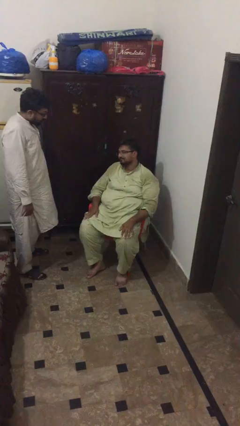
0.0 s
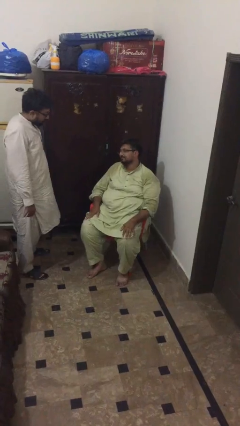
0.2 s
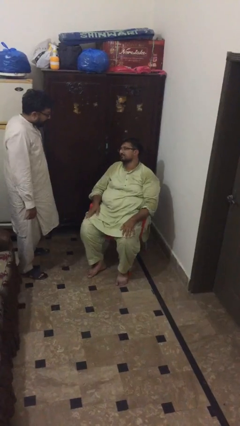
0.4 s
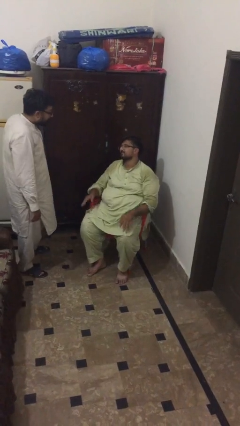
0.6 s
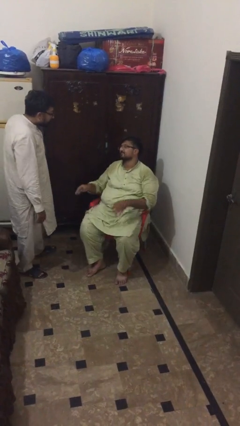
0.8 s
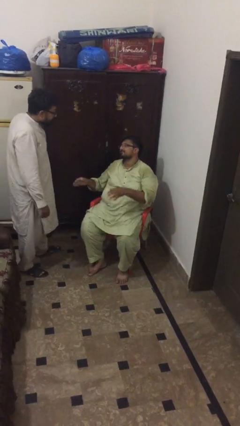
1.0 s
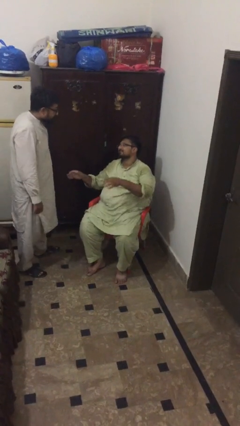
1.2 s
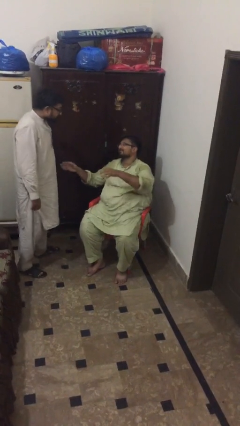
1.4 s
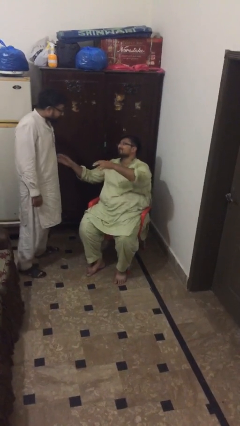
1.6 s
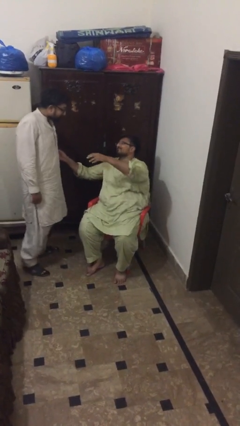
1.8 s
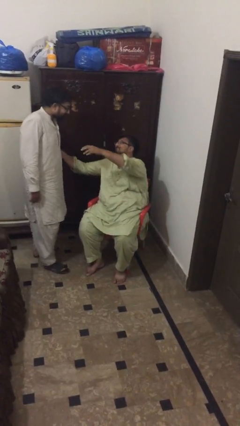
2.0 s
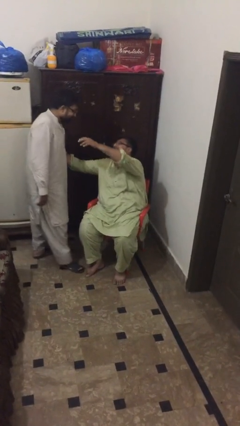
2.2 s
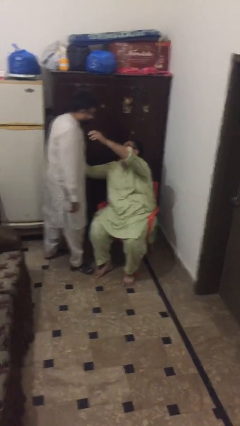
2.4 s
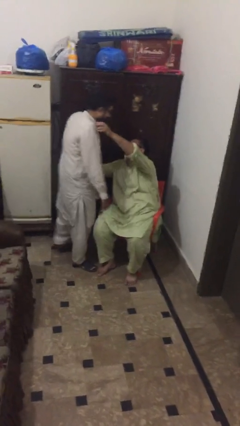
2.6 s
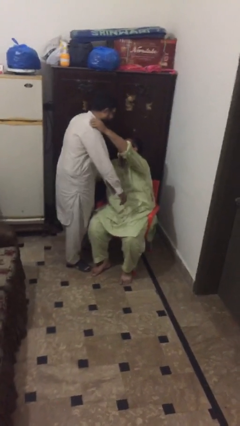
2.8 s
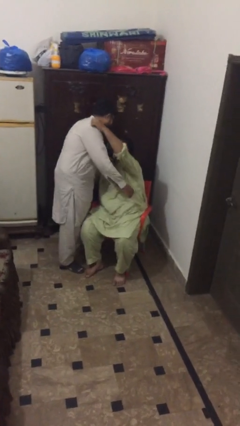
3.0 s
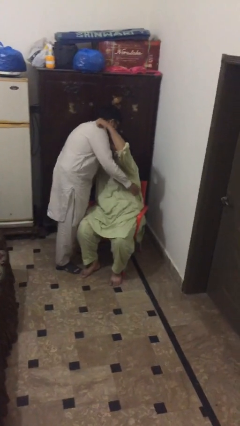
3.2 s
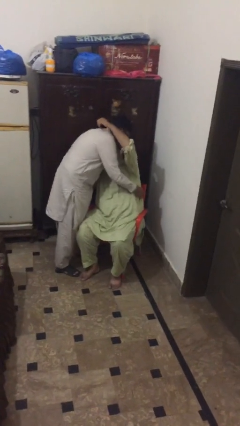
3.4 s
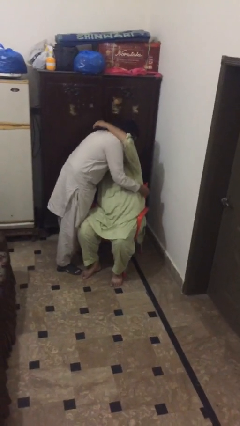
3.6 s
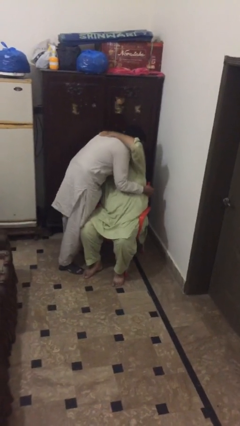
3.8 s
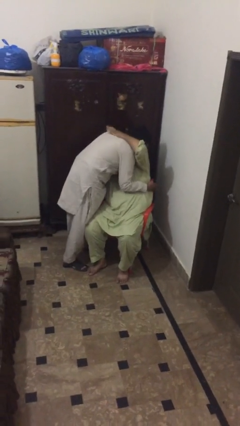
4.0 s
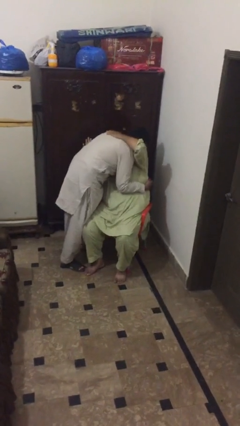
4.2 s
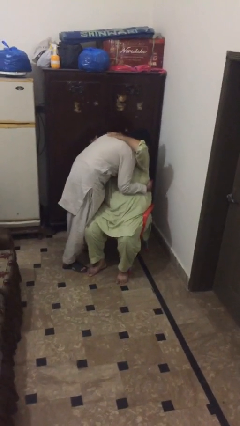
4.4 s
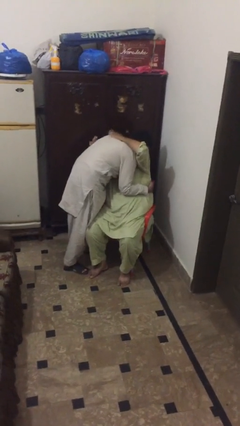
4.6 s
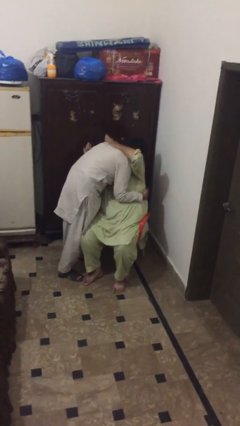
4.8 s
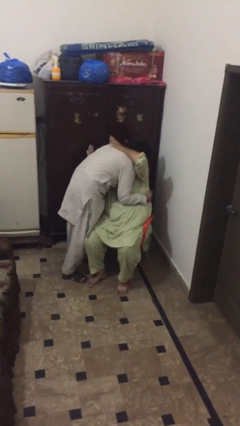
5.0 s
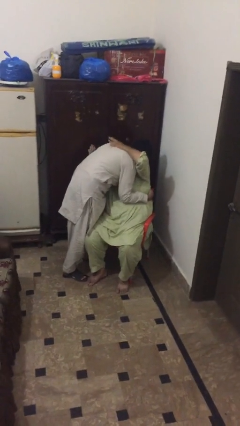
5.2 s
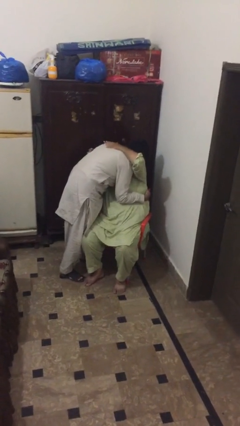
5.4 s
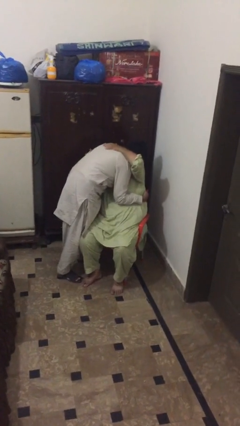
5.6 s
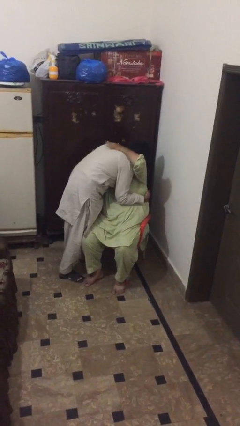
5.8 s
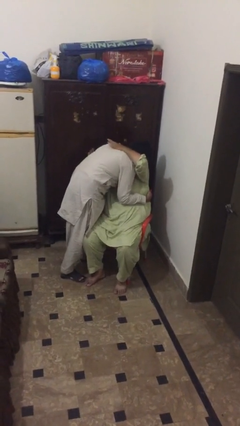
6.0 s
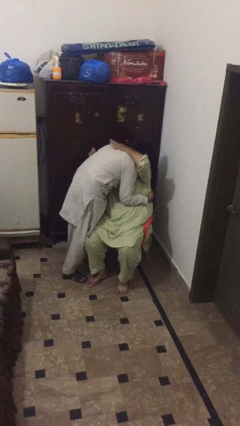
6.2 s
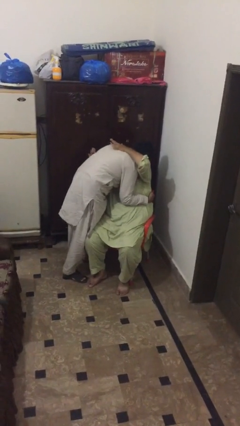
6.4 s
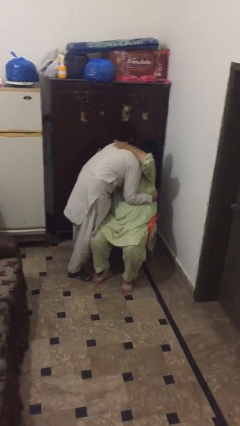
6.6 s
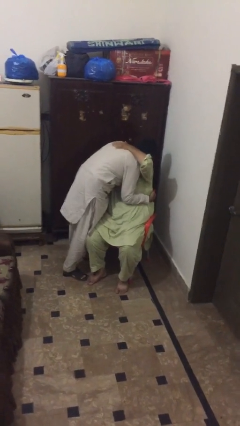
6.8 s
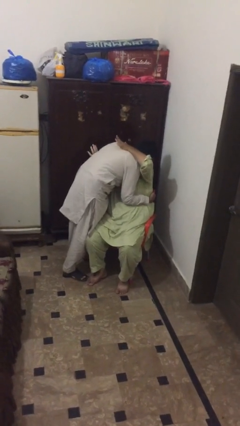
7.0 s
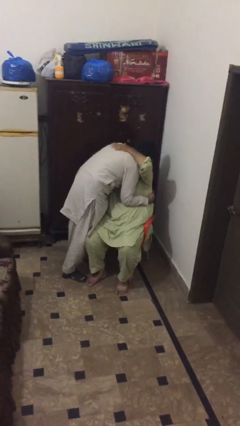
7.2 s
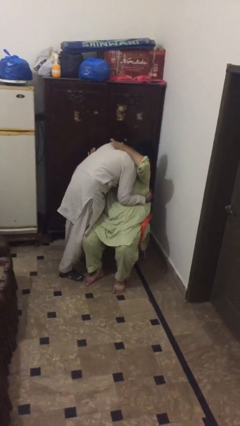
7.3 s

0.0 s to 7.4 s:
person embraces person

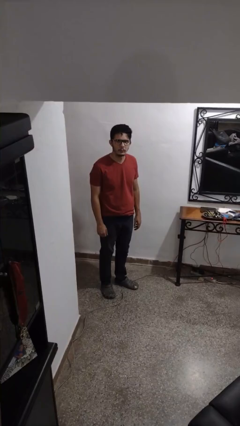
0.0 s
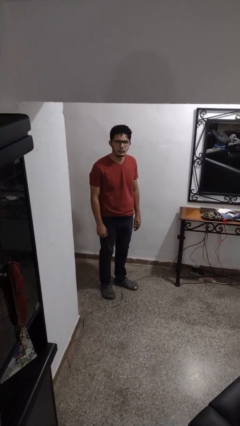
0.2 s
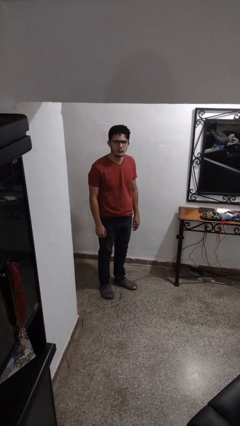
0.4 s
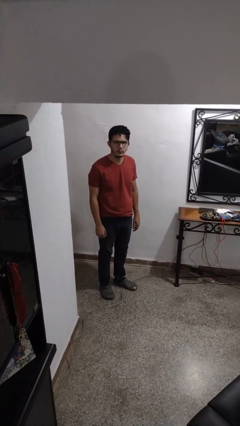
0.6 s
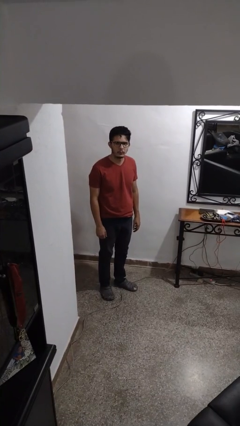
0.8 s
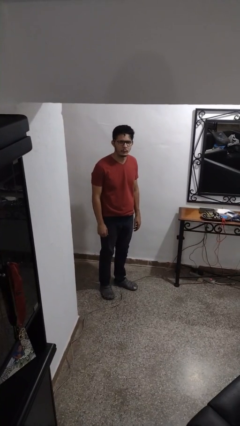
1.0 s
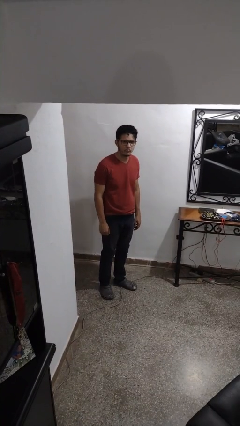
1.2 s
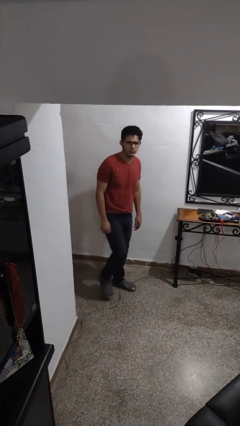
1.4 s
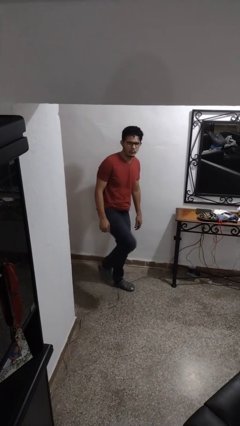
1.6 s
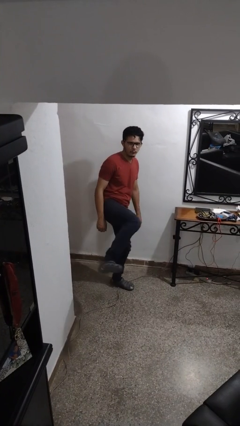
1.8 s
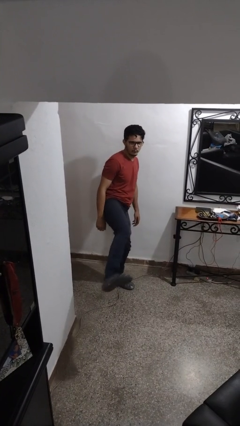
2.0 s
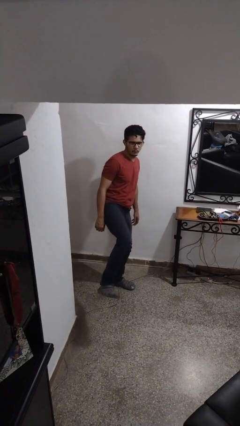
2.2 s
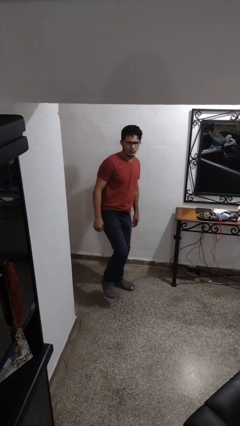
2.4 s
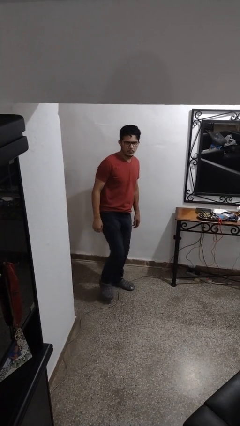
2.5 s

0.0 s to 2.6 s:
person karate kicks

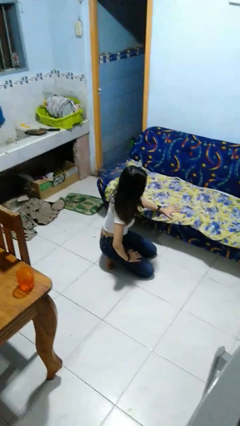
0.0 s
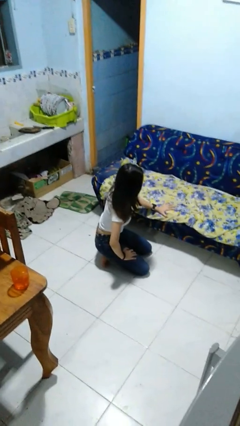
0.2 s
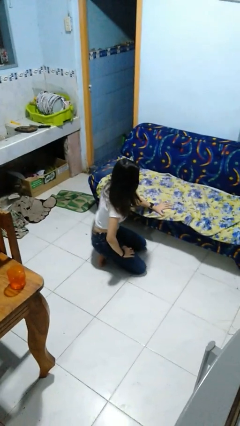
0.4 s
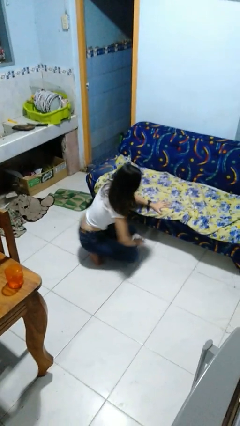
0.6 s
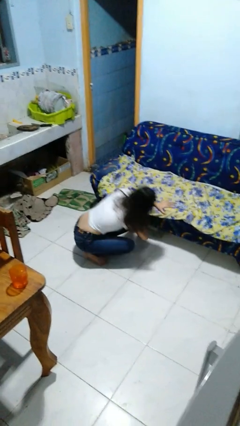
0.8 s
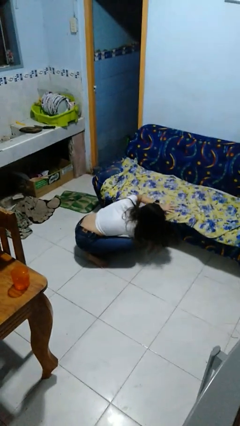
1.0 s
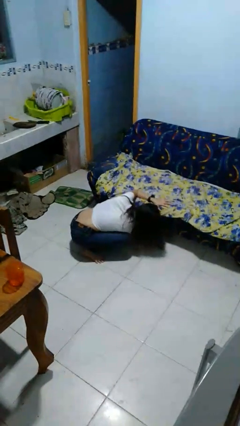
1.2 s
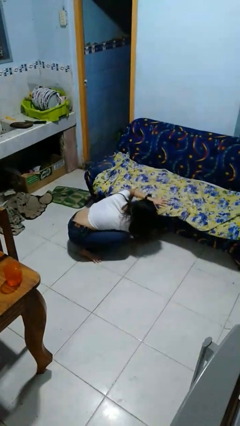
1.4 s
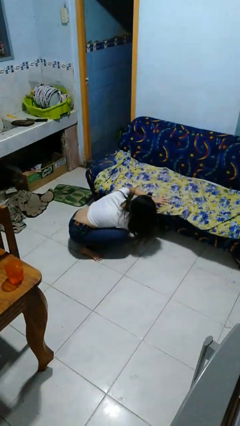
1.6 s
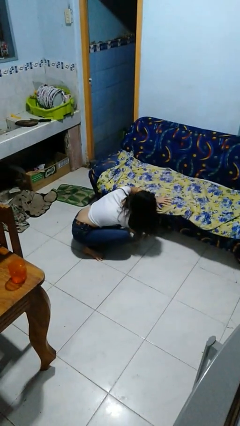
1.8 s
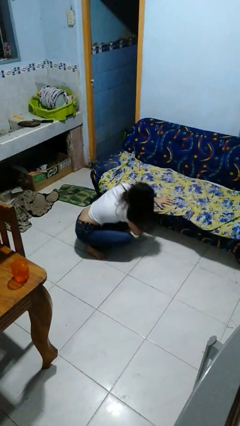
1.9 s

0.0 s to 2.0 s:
person searches under couch

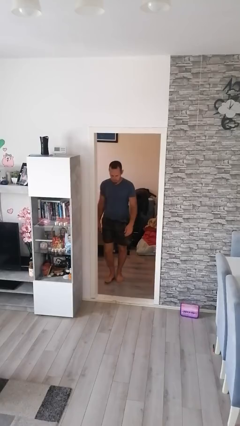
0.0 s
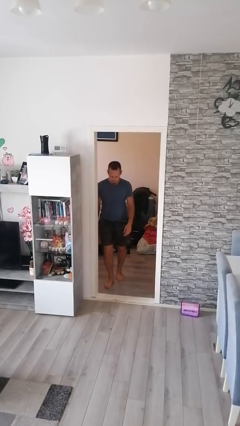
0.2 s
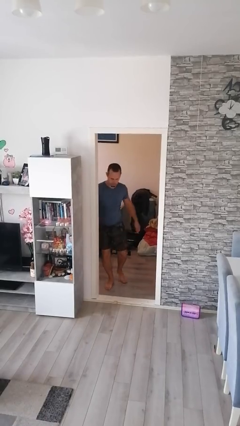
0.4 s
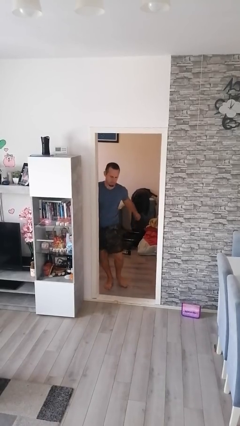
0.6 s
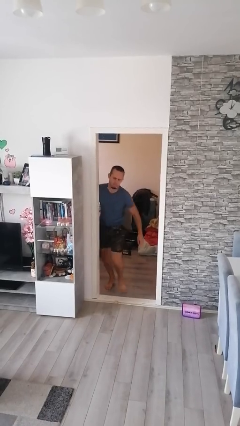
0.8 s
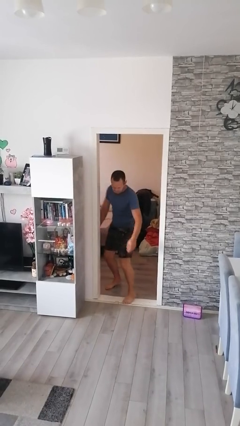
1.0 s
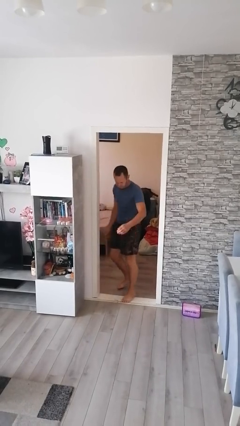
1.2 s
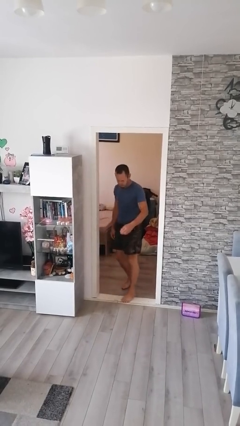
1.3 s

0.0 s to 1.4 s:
person bumps into wall

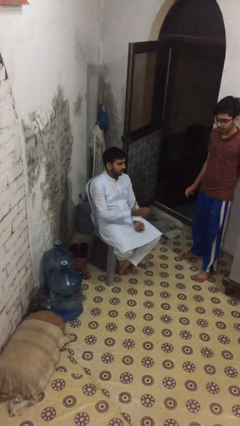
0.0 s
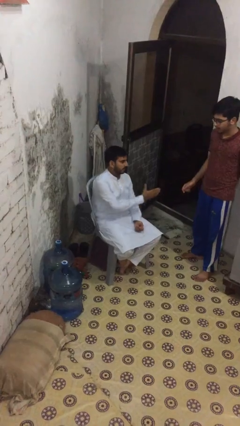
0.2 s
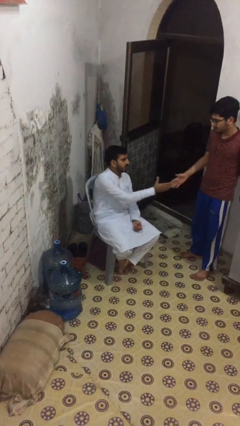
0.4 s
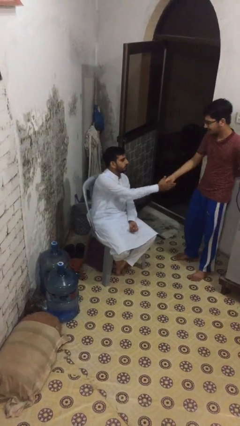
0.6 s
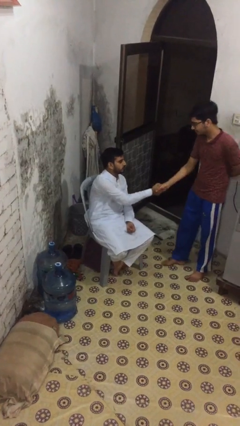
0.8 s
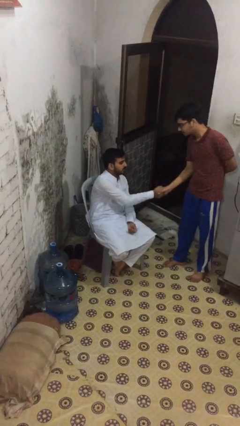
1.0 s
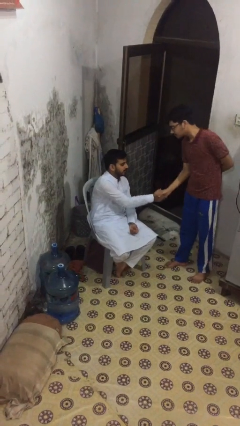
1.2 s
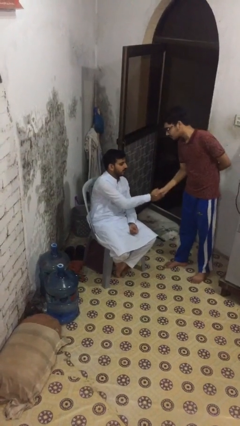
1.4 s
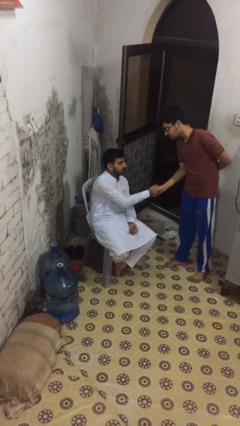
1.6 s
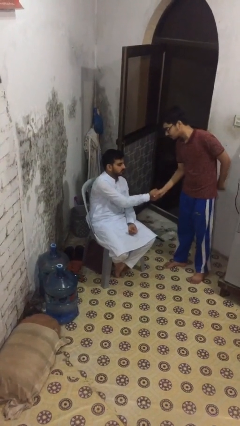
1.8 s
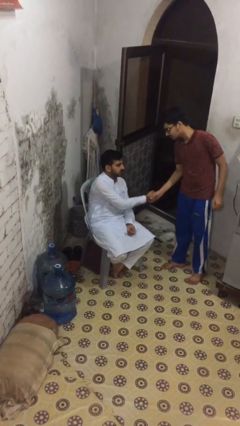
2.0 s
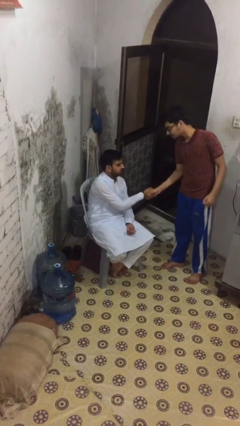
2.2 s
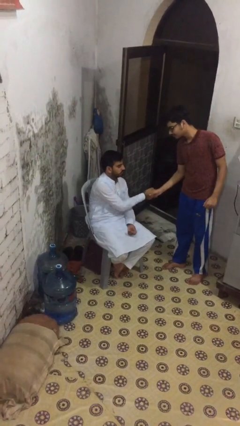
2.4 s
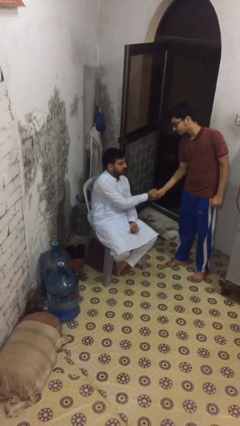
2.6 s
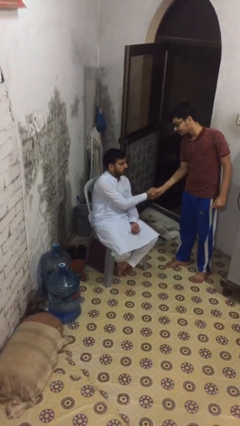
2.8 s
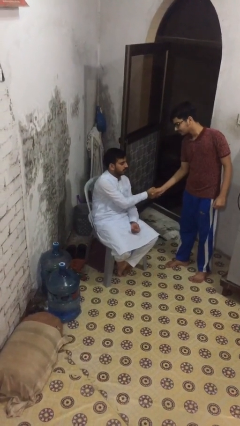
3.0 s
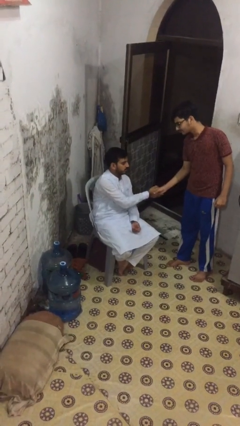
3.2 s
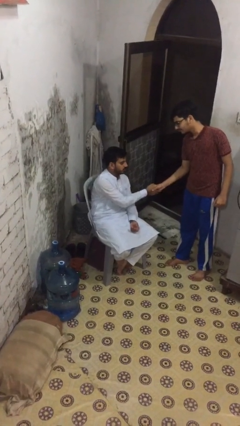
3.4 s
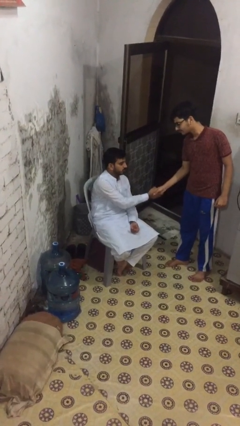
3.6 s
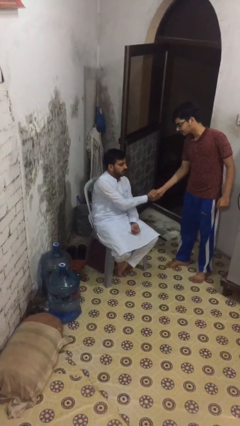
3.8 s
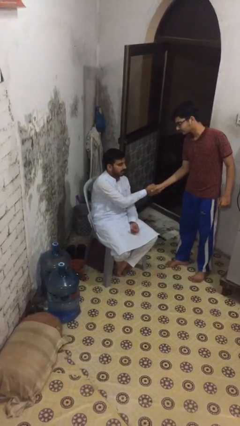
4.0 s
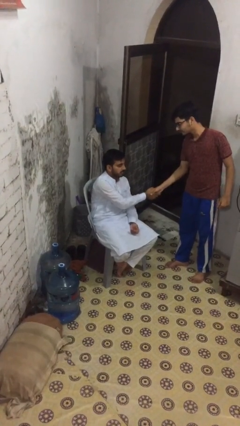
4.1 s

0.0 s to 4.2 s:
person shakes hand
